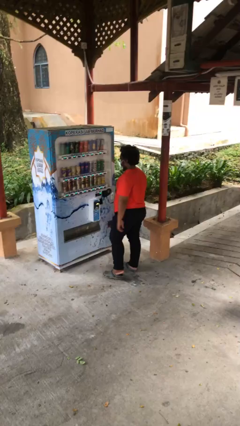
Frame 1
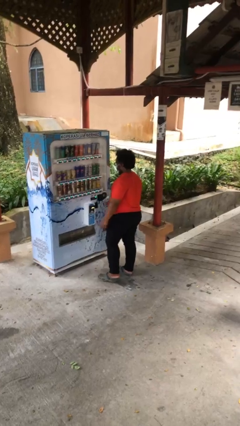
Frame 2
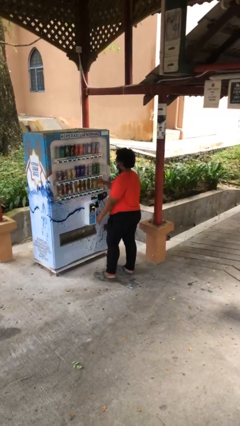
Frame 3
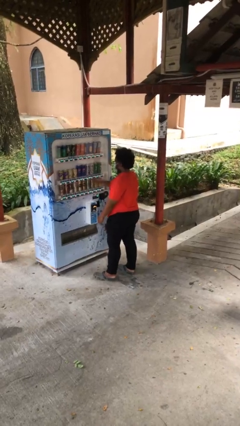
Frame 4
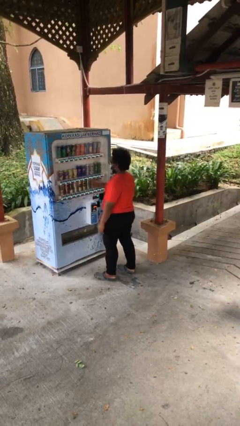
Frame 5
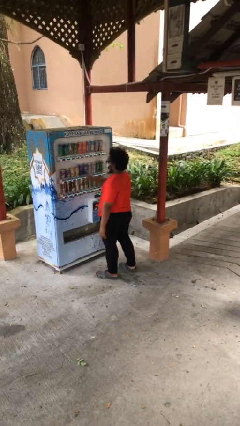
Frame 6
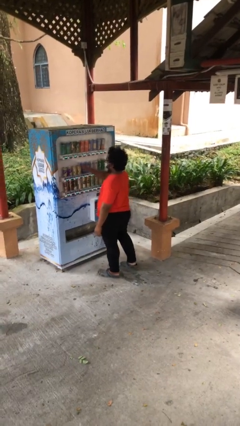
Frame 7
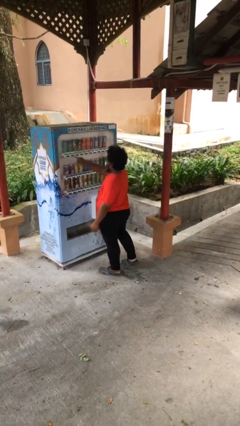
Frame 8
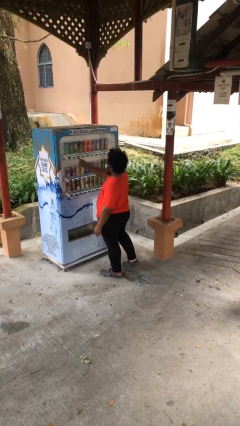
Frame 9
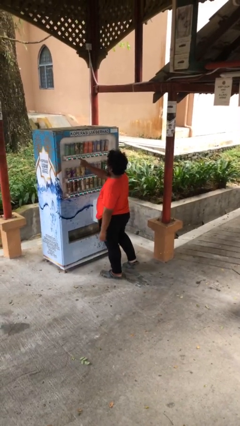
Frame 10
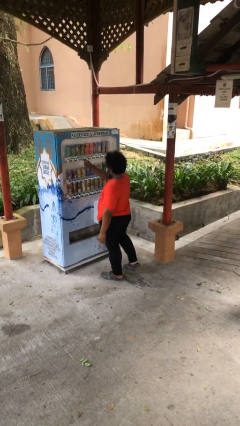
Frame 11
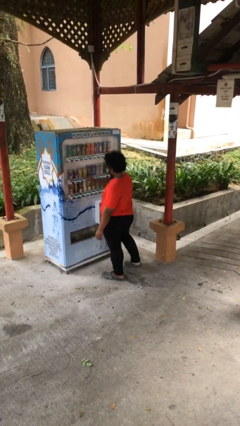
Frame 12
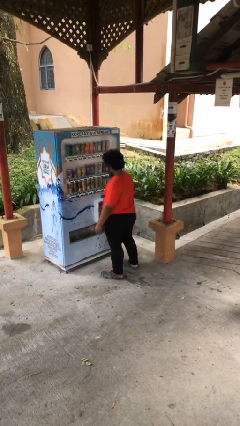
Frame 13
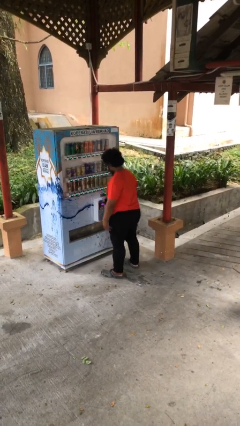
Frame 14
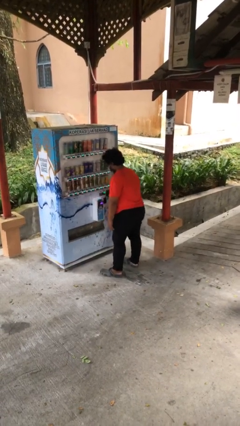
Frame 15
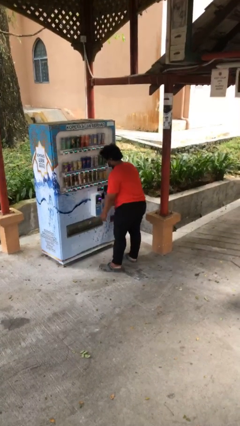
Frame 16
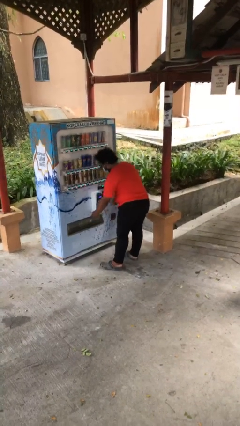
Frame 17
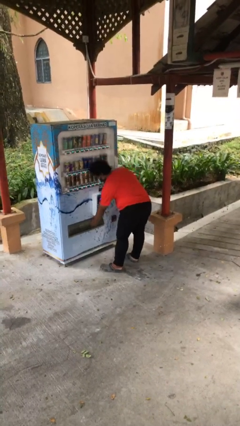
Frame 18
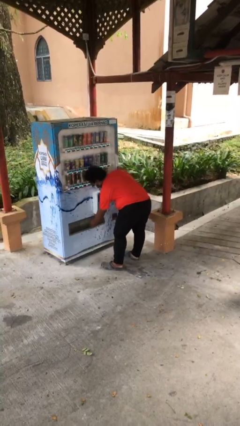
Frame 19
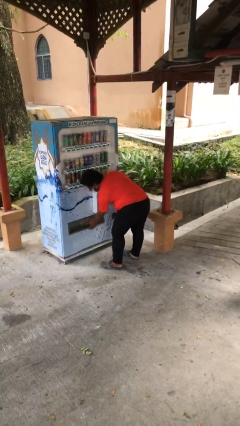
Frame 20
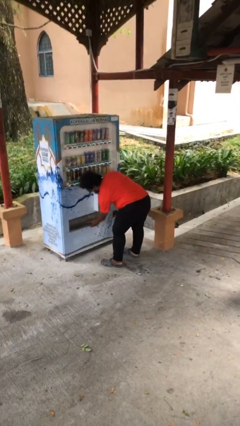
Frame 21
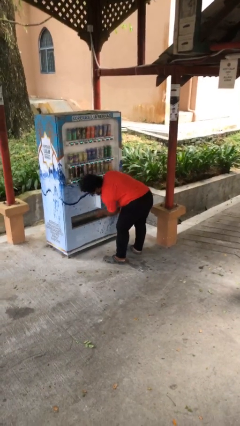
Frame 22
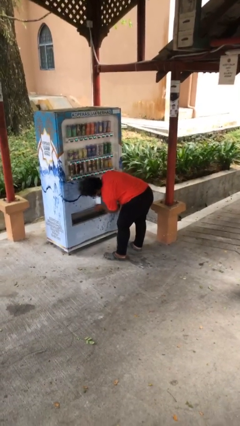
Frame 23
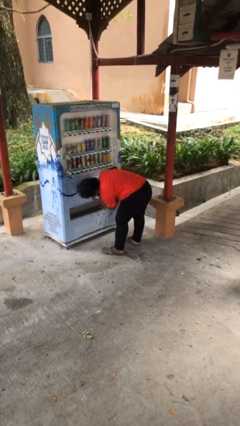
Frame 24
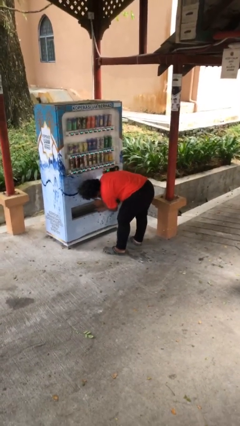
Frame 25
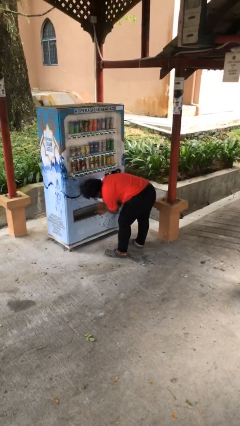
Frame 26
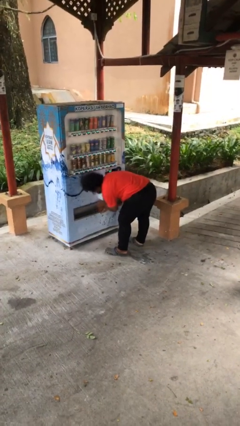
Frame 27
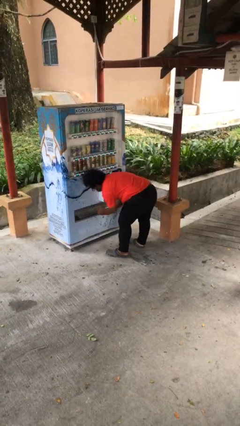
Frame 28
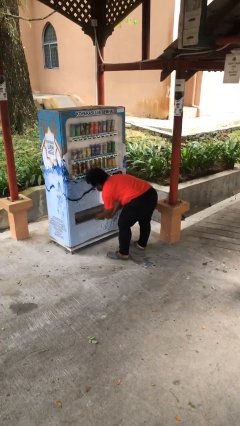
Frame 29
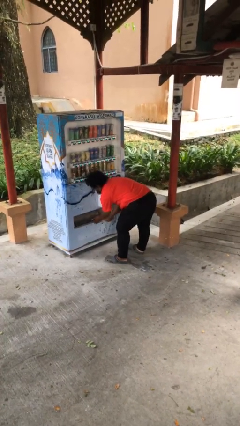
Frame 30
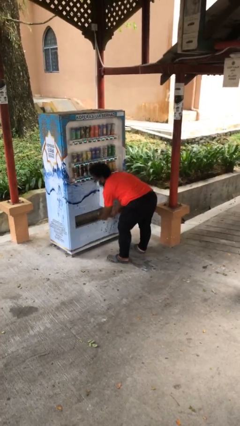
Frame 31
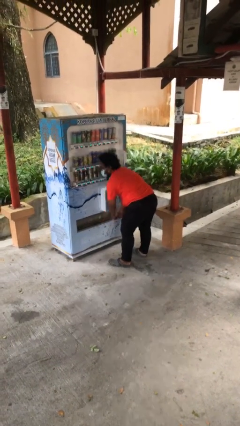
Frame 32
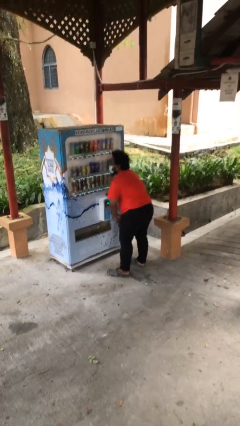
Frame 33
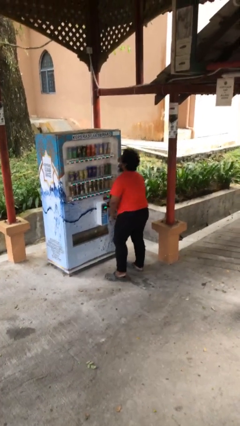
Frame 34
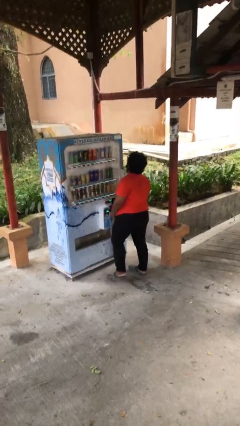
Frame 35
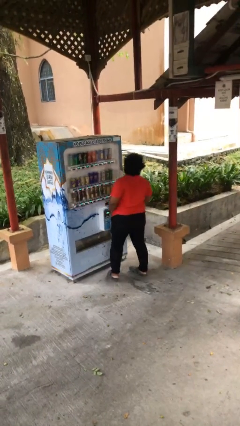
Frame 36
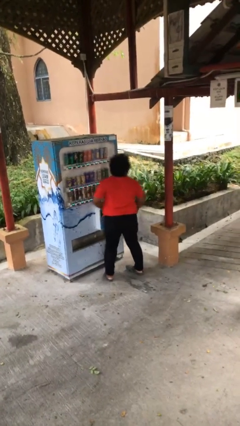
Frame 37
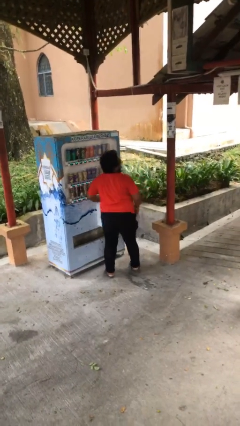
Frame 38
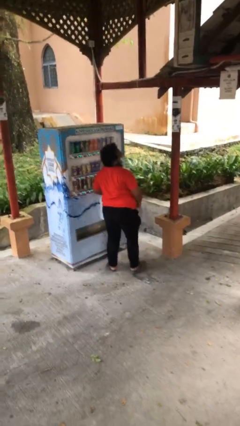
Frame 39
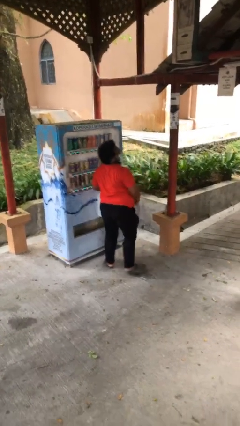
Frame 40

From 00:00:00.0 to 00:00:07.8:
person purchases from machine

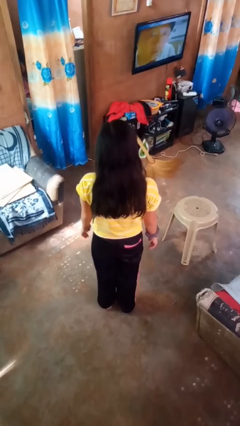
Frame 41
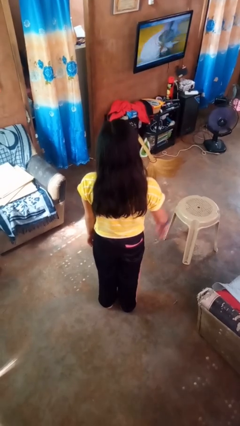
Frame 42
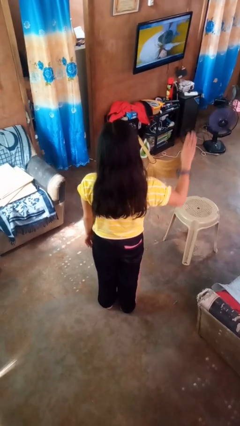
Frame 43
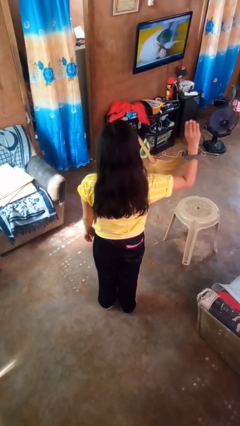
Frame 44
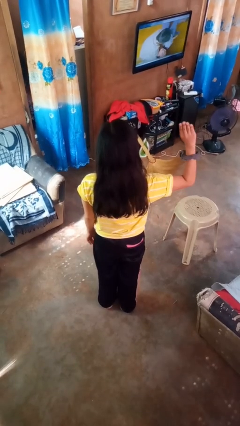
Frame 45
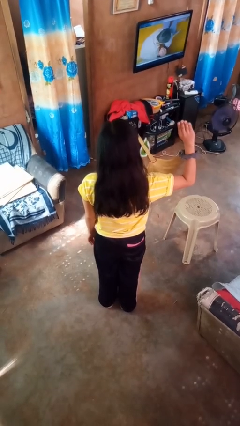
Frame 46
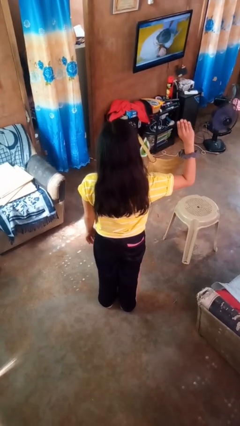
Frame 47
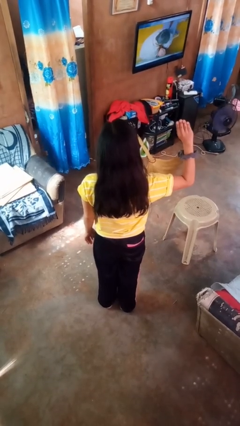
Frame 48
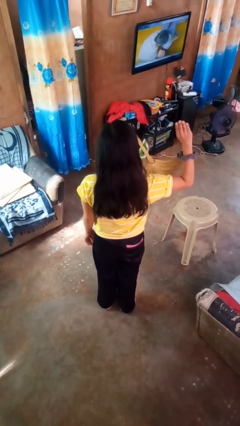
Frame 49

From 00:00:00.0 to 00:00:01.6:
person gestures number four

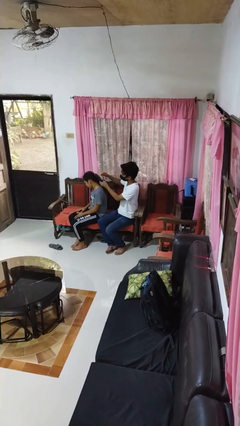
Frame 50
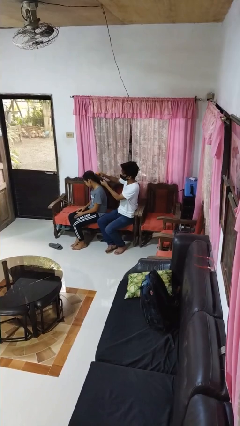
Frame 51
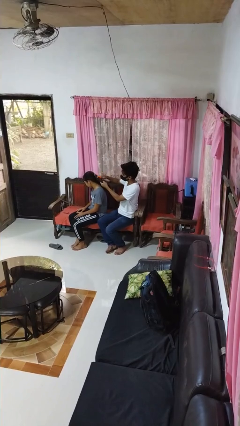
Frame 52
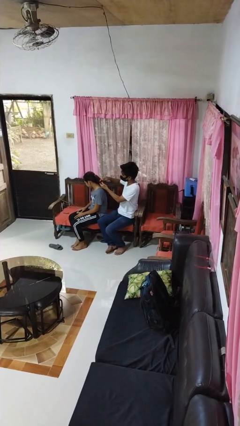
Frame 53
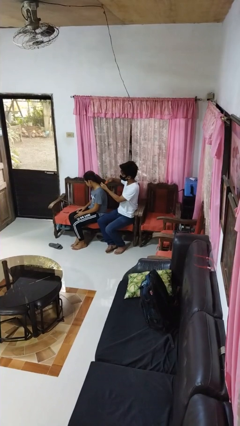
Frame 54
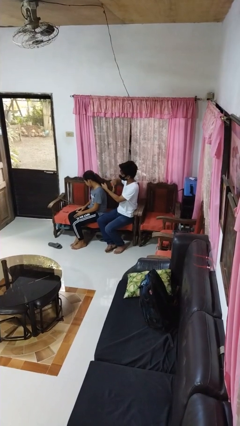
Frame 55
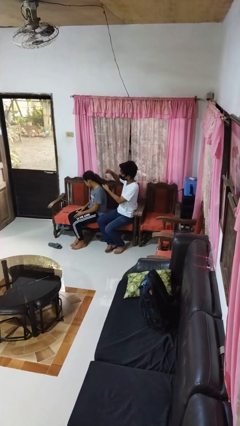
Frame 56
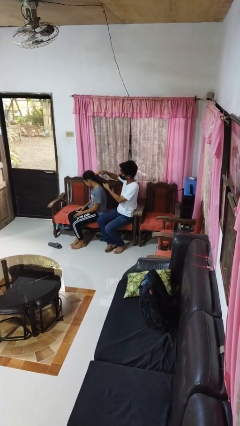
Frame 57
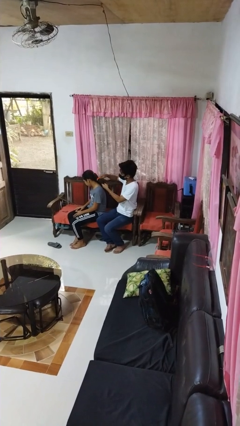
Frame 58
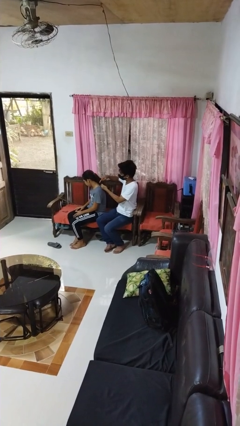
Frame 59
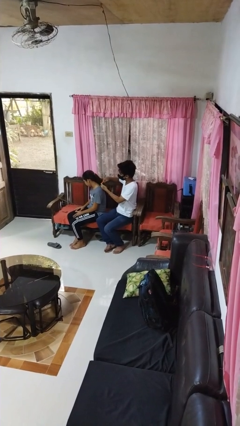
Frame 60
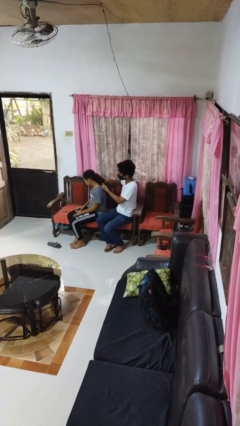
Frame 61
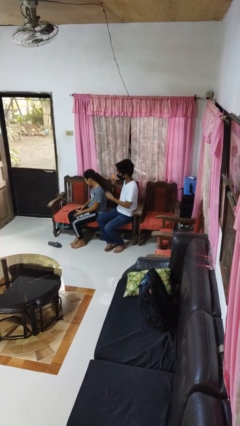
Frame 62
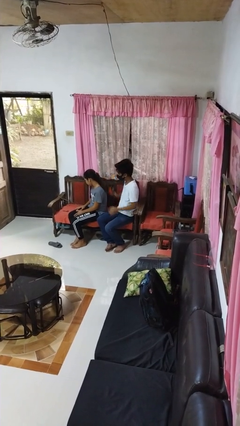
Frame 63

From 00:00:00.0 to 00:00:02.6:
person brushes hair of person

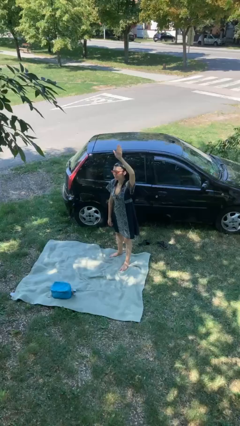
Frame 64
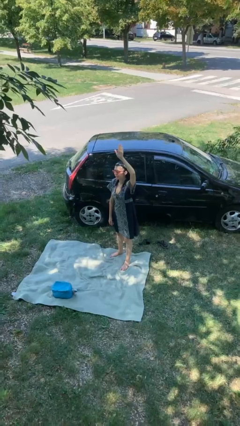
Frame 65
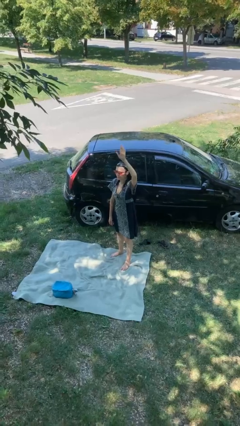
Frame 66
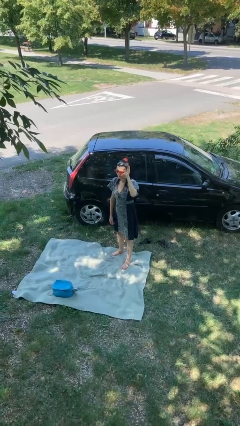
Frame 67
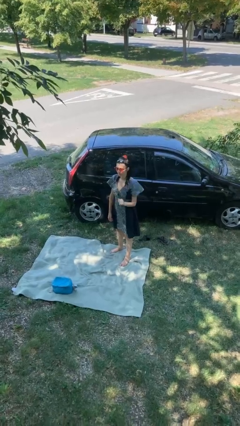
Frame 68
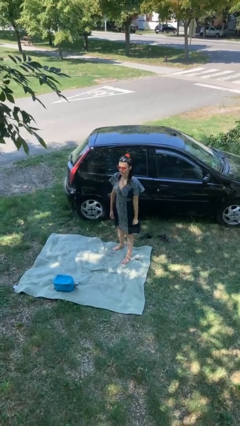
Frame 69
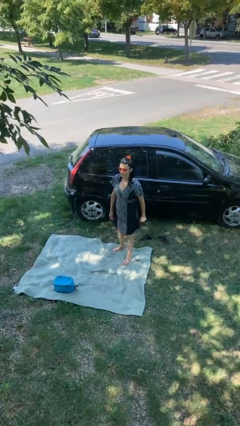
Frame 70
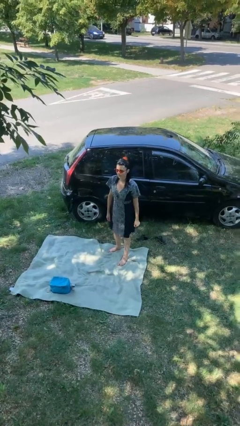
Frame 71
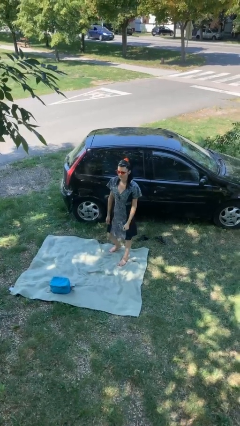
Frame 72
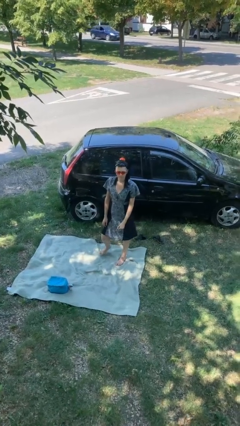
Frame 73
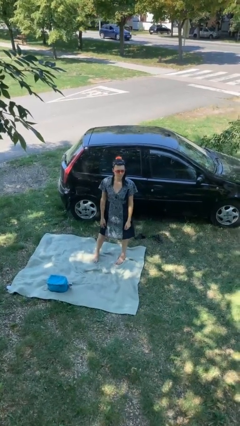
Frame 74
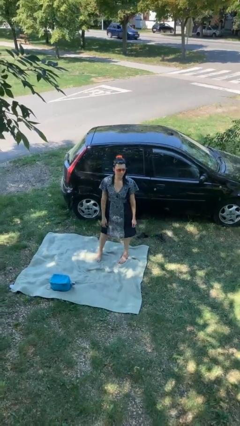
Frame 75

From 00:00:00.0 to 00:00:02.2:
person gestures lower hand

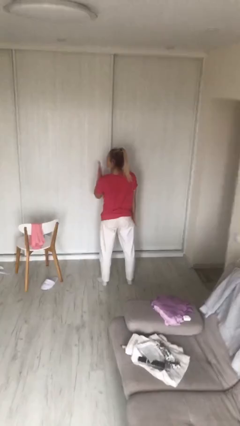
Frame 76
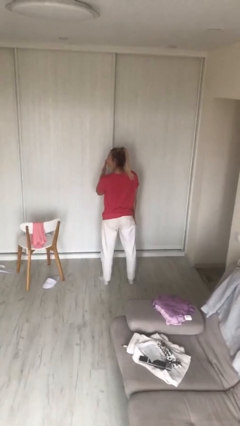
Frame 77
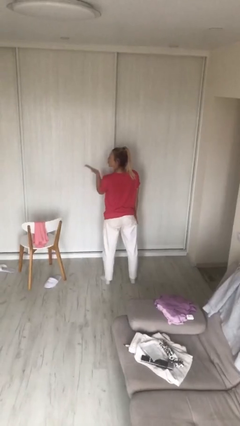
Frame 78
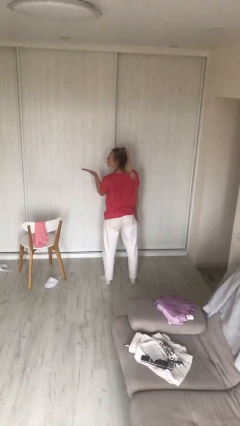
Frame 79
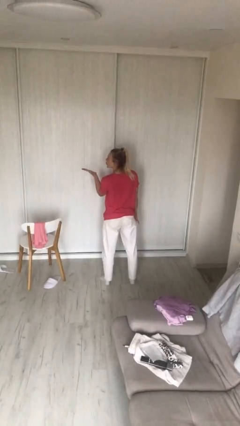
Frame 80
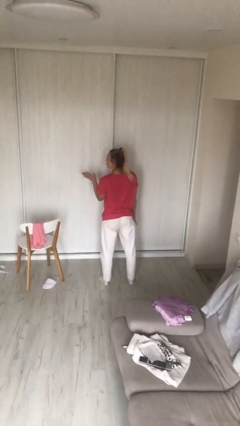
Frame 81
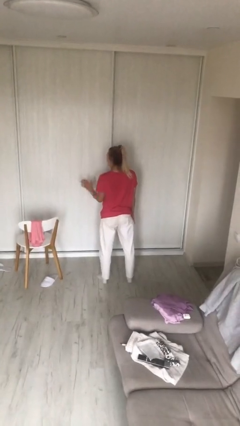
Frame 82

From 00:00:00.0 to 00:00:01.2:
person gestures blow kiss

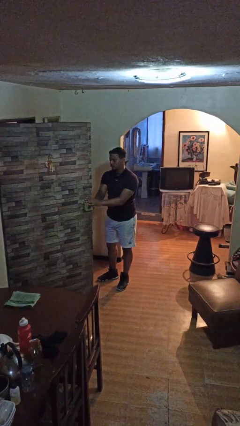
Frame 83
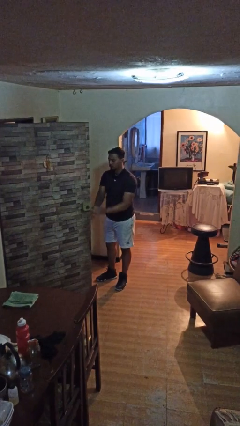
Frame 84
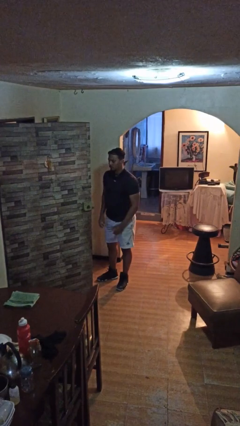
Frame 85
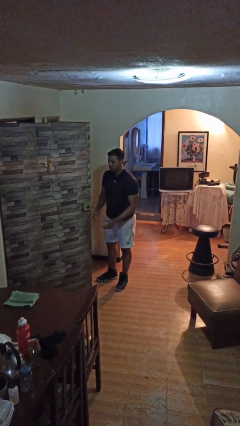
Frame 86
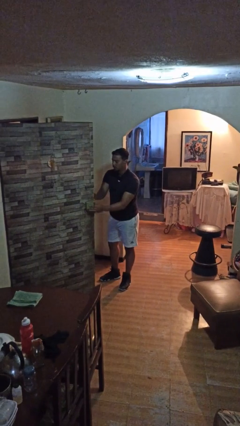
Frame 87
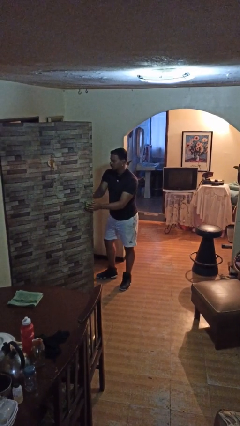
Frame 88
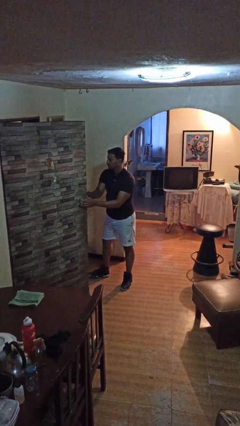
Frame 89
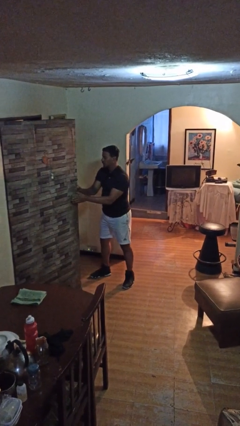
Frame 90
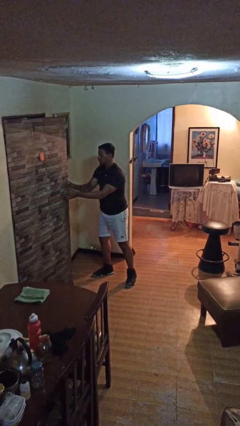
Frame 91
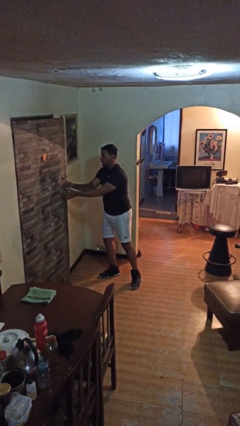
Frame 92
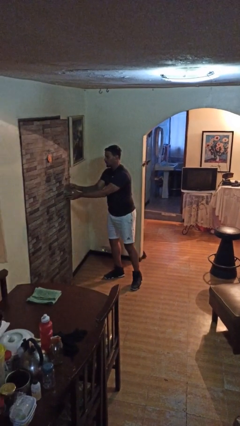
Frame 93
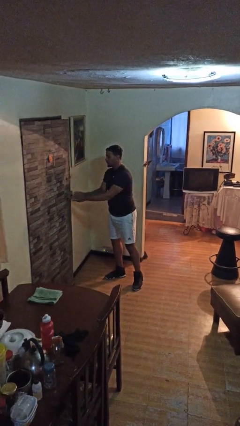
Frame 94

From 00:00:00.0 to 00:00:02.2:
person closes facility door
